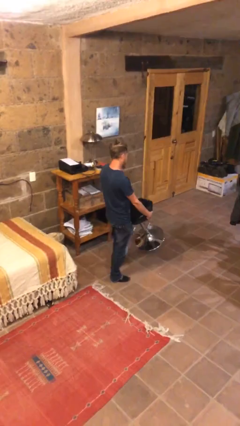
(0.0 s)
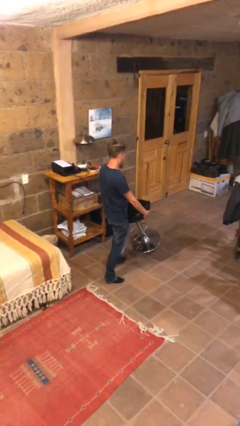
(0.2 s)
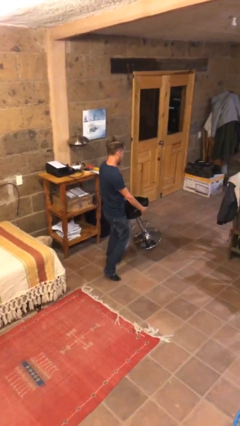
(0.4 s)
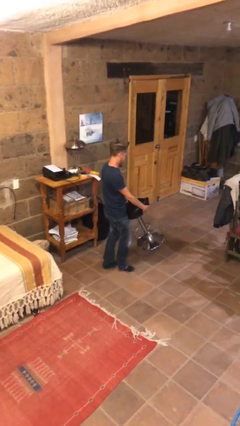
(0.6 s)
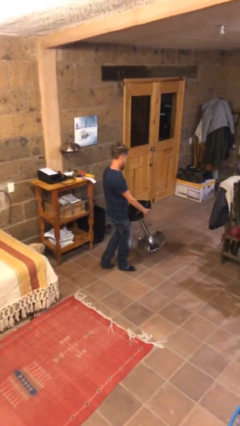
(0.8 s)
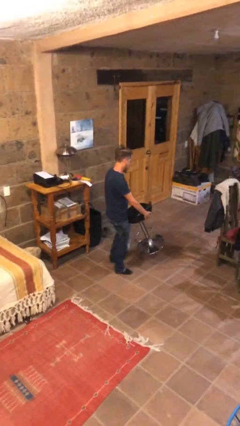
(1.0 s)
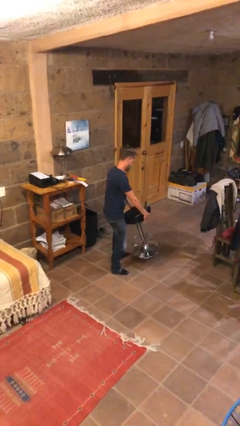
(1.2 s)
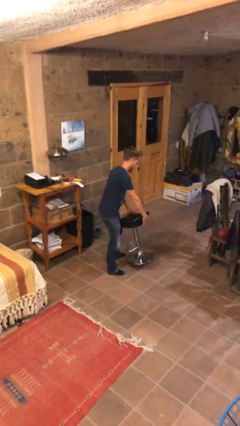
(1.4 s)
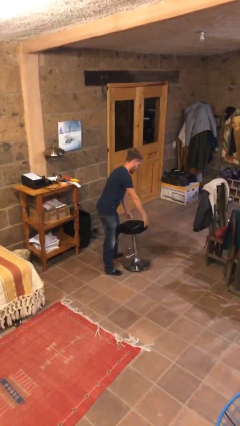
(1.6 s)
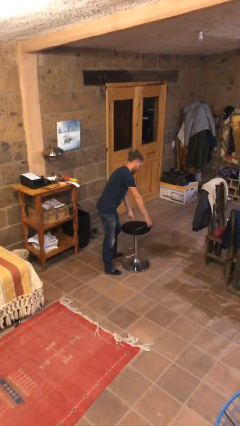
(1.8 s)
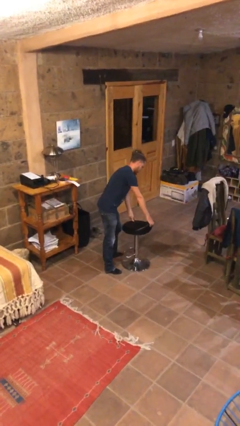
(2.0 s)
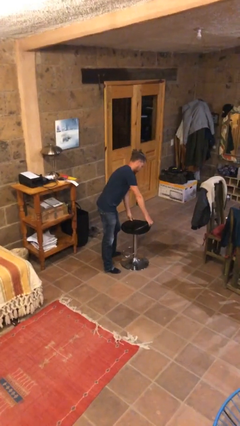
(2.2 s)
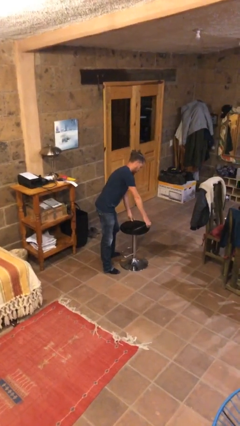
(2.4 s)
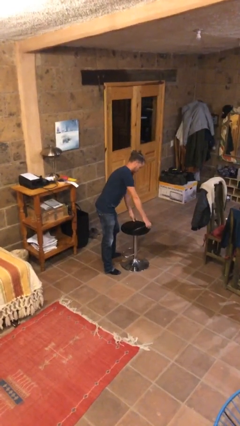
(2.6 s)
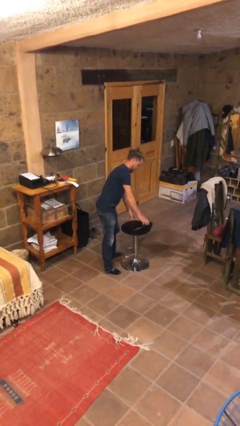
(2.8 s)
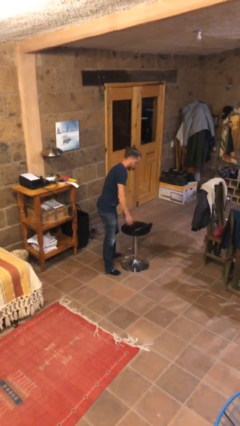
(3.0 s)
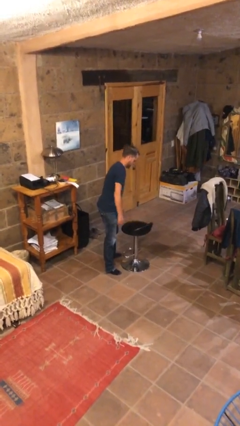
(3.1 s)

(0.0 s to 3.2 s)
person puts down object on floor

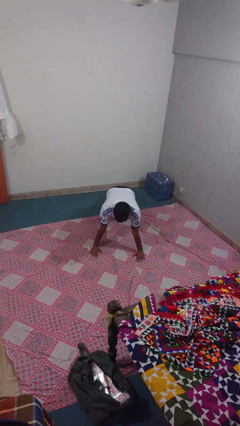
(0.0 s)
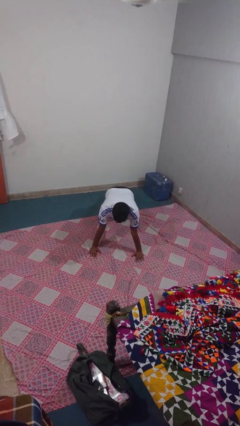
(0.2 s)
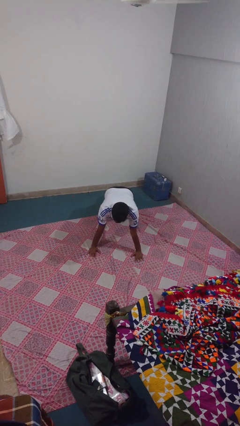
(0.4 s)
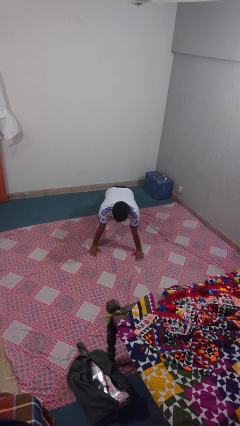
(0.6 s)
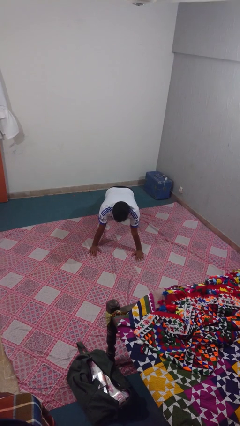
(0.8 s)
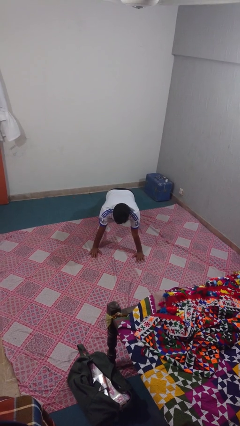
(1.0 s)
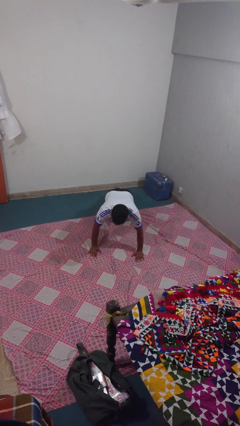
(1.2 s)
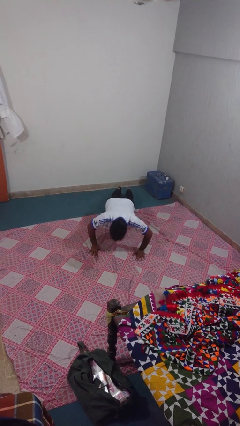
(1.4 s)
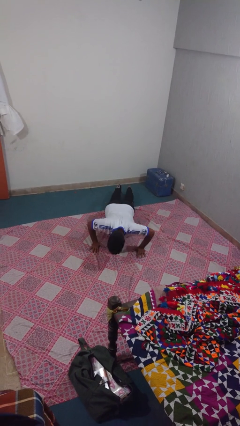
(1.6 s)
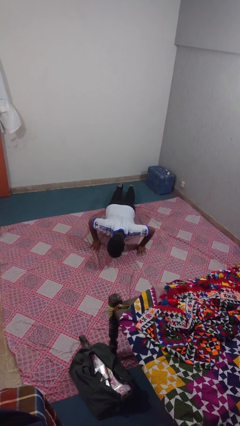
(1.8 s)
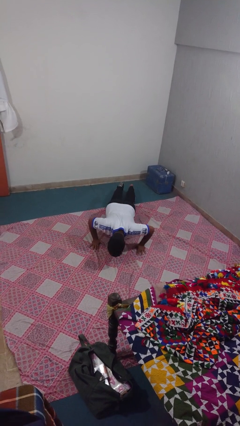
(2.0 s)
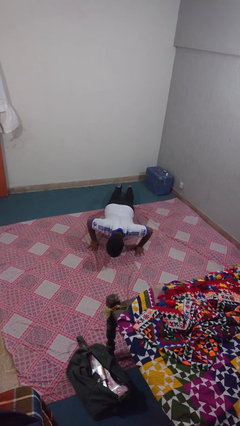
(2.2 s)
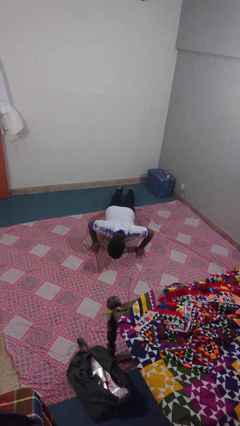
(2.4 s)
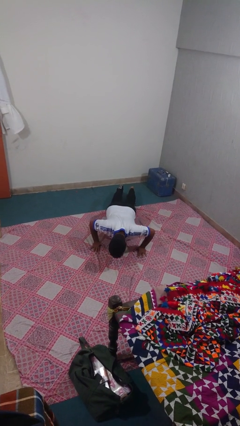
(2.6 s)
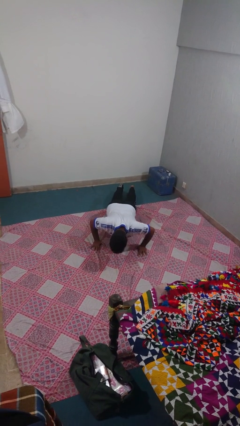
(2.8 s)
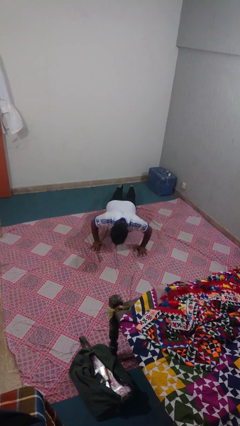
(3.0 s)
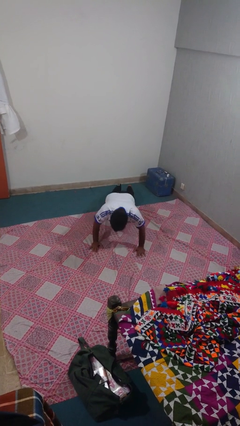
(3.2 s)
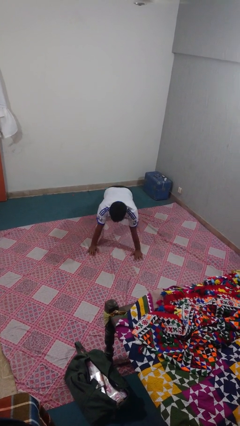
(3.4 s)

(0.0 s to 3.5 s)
person exercises with pushup

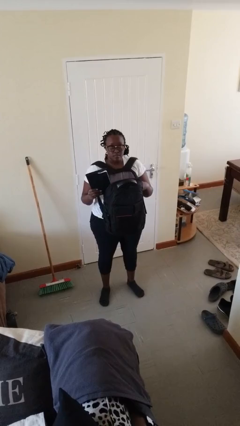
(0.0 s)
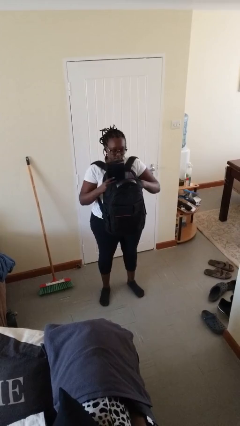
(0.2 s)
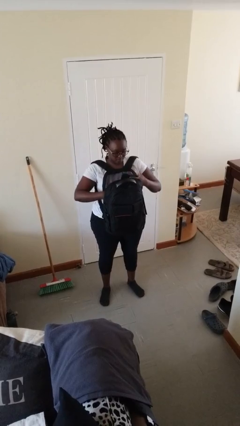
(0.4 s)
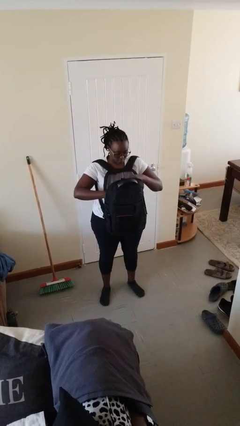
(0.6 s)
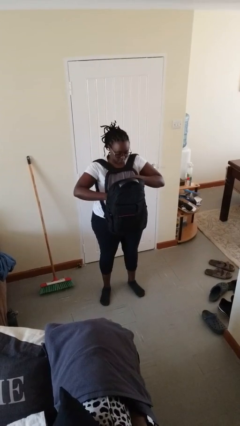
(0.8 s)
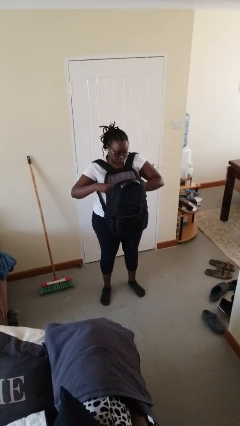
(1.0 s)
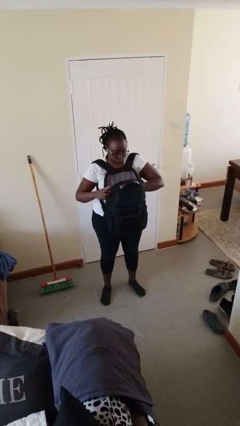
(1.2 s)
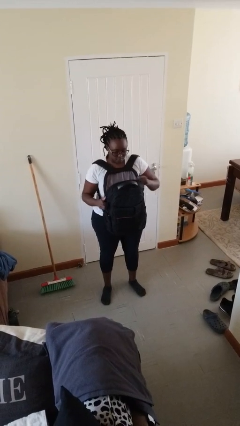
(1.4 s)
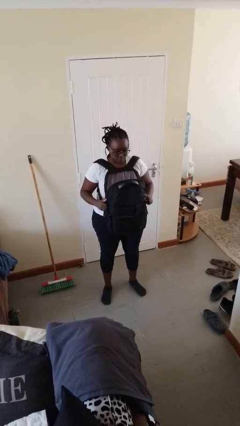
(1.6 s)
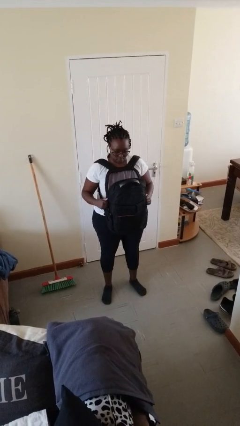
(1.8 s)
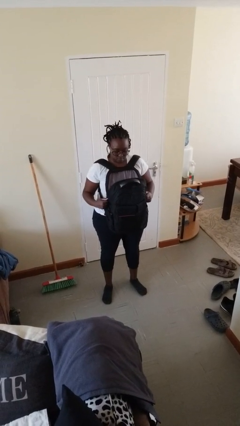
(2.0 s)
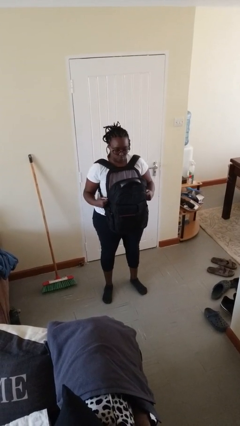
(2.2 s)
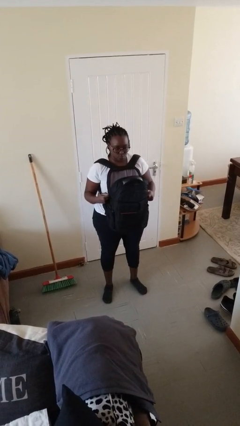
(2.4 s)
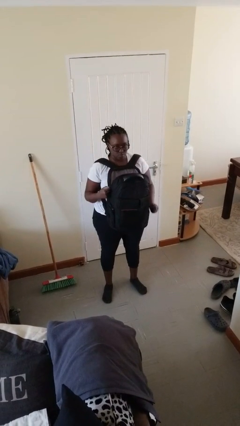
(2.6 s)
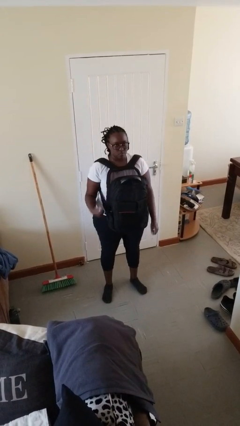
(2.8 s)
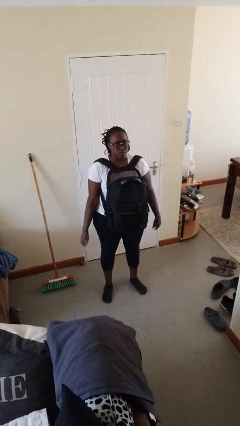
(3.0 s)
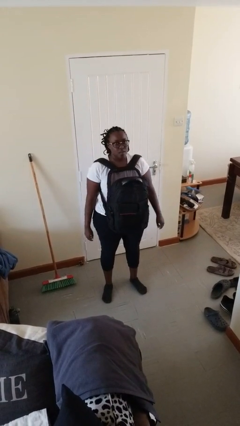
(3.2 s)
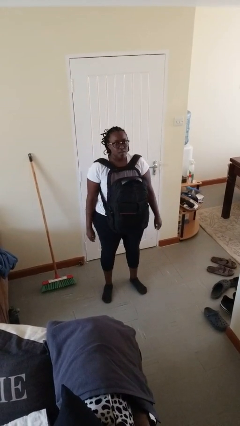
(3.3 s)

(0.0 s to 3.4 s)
person puts object into backpack

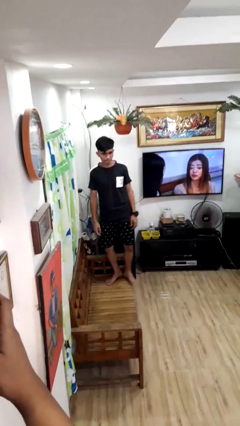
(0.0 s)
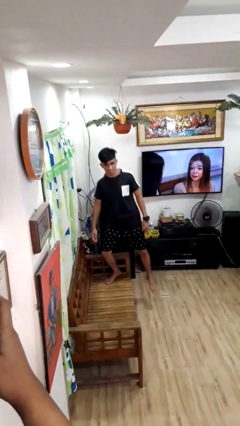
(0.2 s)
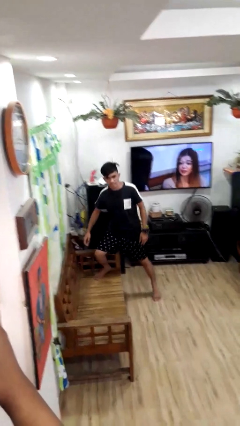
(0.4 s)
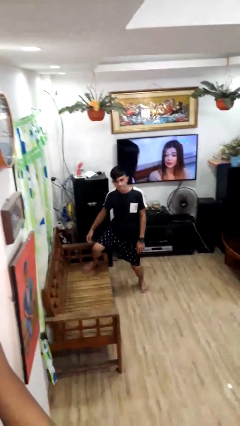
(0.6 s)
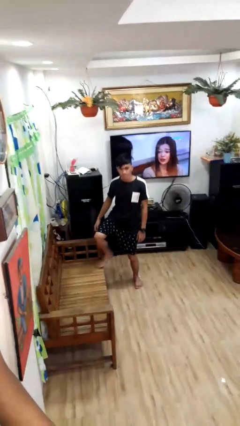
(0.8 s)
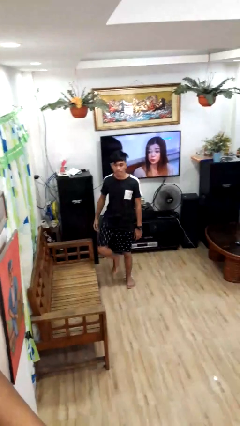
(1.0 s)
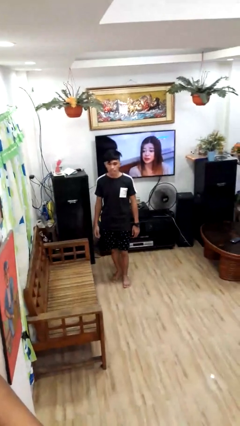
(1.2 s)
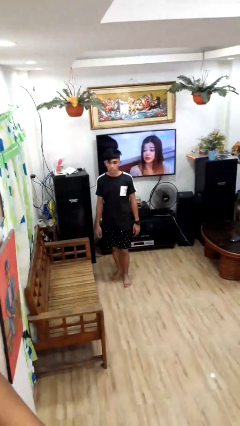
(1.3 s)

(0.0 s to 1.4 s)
person climbs off couch

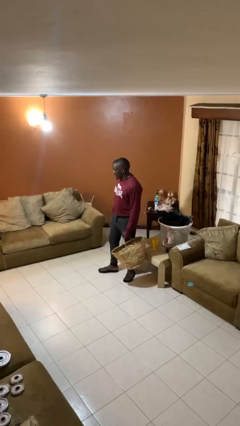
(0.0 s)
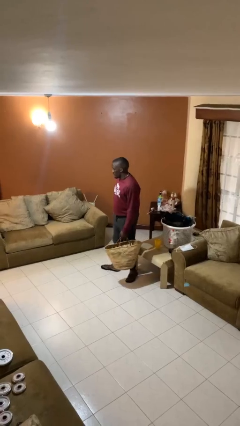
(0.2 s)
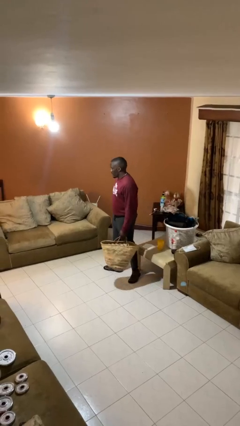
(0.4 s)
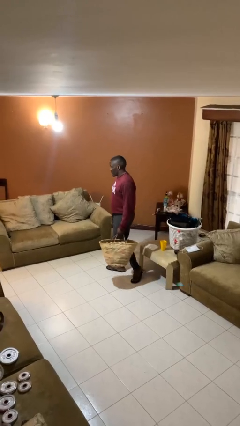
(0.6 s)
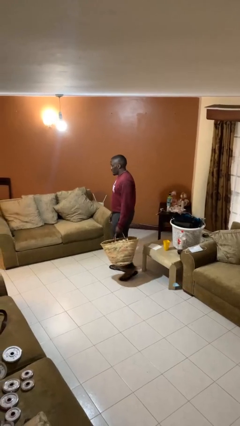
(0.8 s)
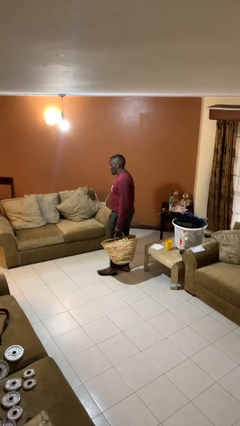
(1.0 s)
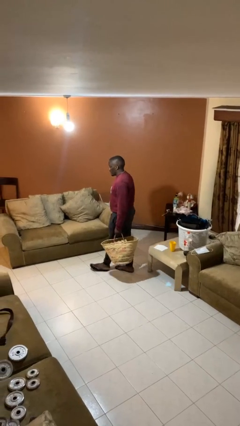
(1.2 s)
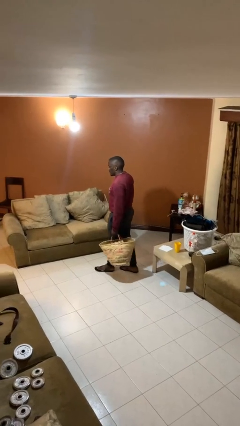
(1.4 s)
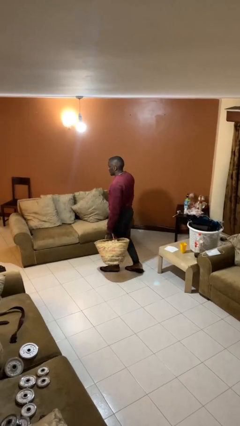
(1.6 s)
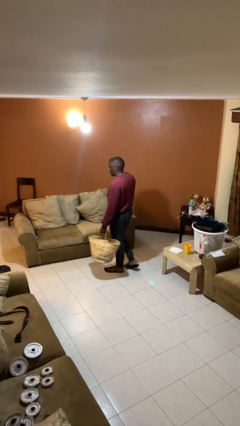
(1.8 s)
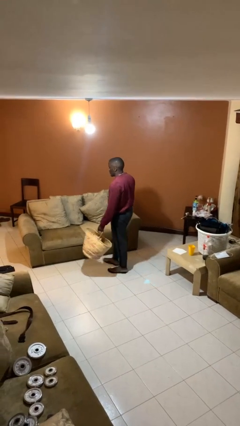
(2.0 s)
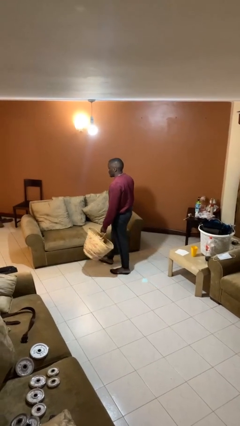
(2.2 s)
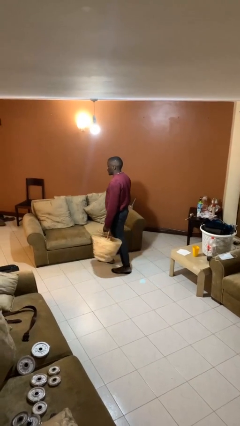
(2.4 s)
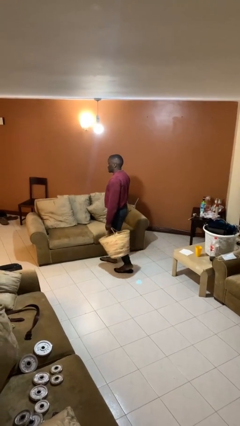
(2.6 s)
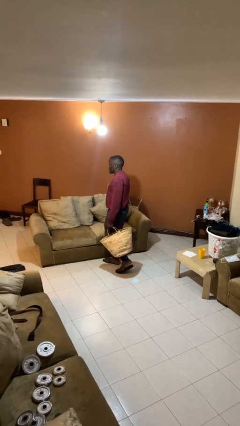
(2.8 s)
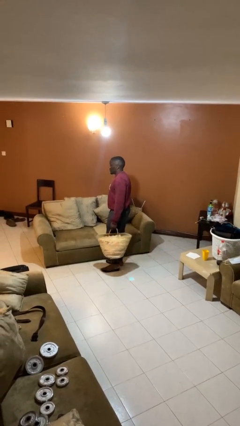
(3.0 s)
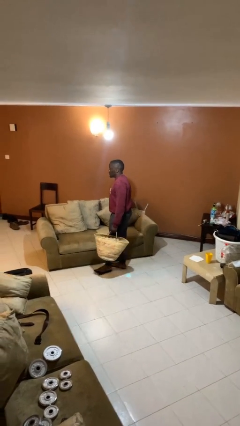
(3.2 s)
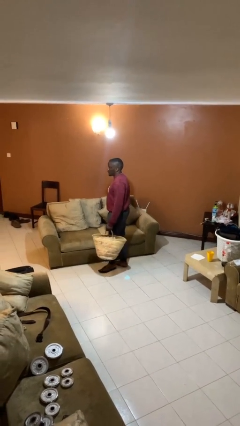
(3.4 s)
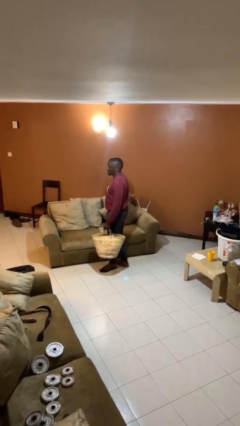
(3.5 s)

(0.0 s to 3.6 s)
person carries groceries

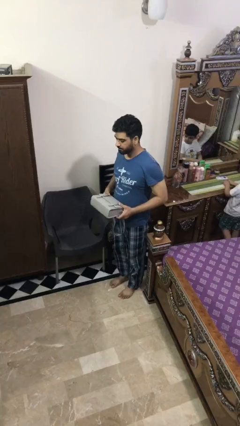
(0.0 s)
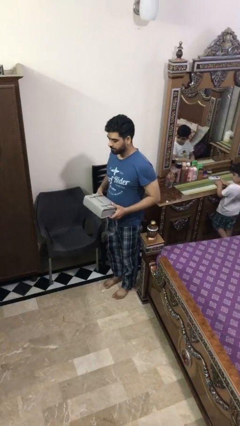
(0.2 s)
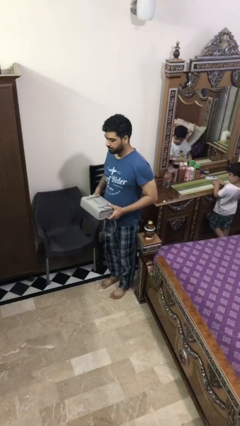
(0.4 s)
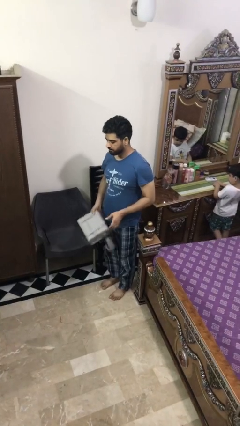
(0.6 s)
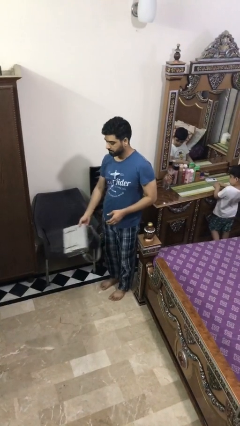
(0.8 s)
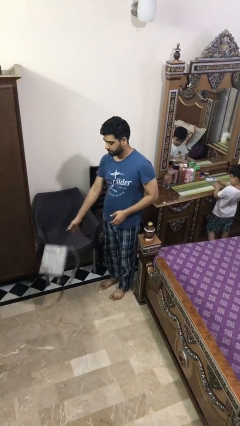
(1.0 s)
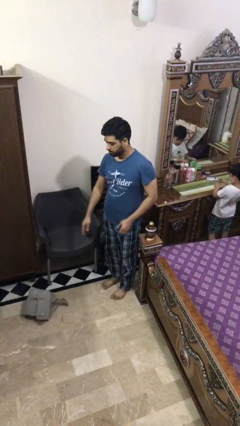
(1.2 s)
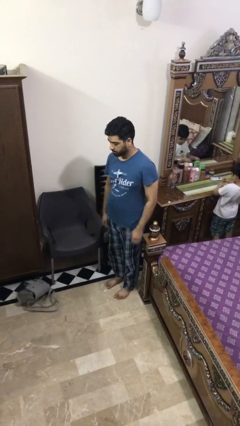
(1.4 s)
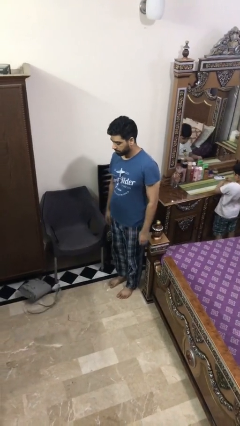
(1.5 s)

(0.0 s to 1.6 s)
person throws object to ground

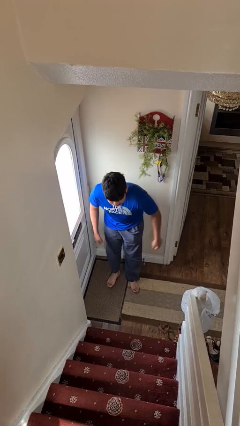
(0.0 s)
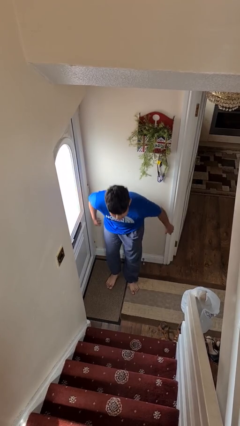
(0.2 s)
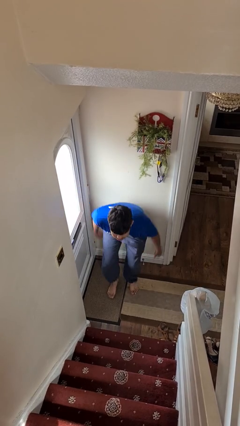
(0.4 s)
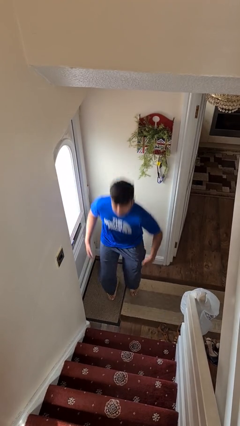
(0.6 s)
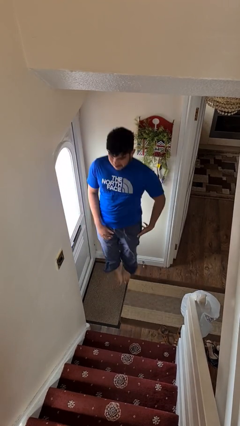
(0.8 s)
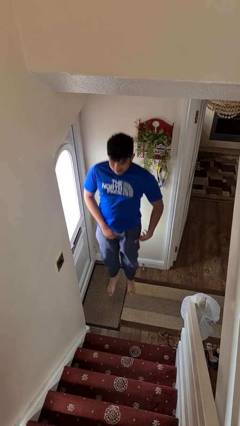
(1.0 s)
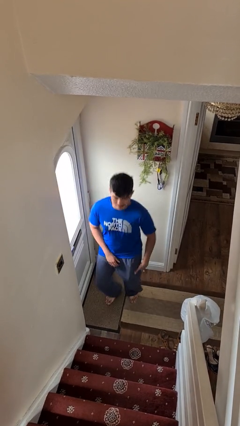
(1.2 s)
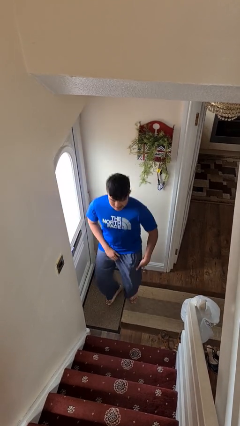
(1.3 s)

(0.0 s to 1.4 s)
person jumps
